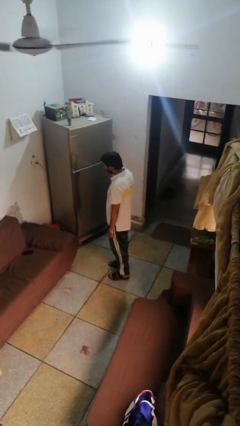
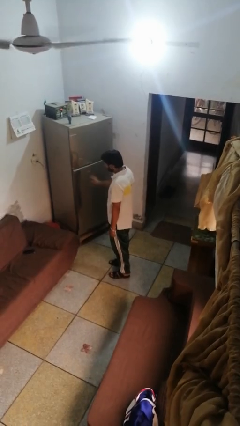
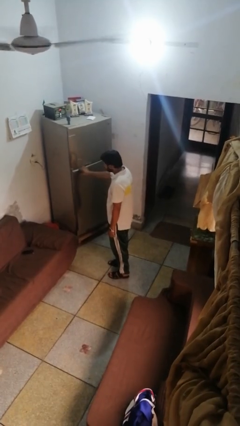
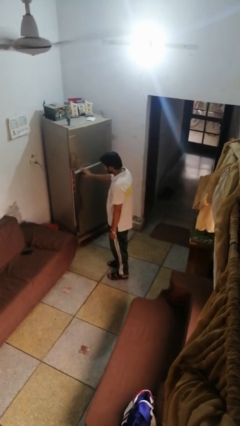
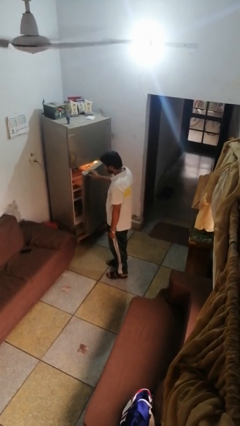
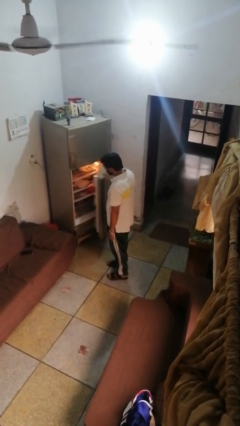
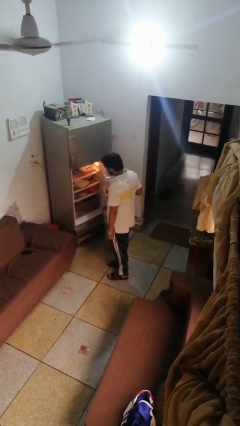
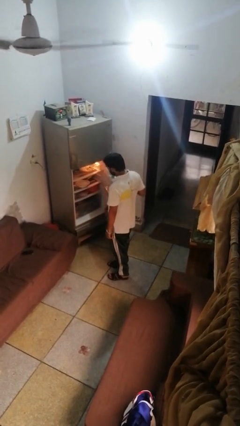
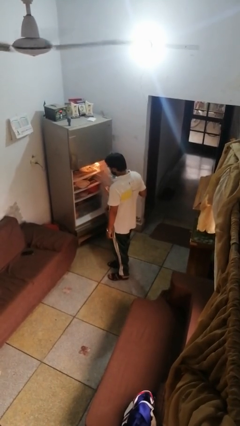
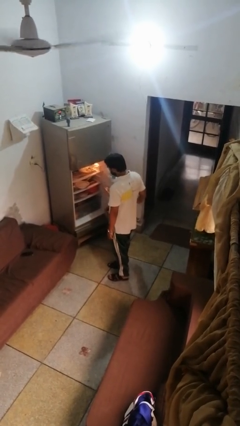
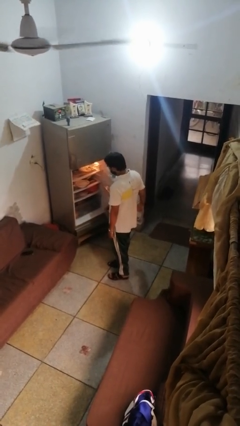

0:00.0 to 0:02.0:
person opens refrigerator

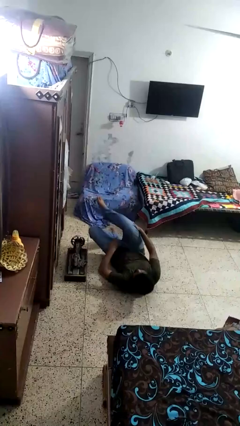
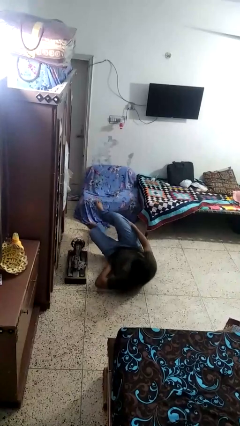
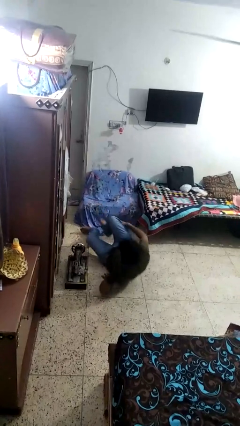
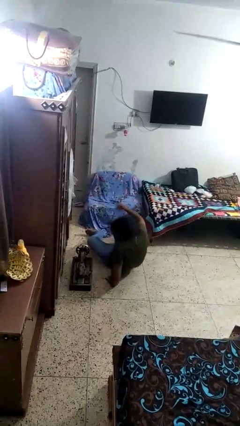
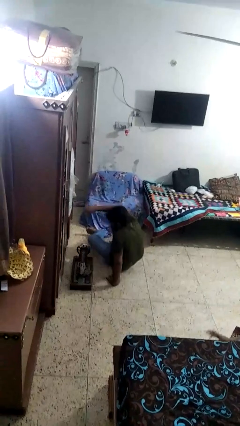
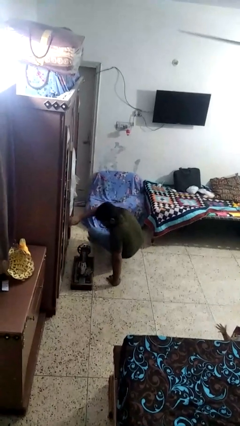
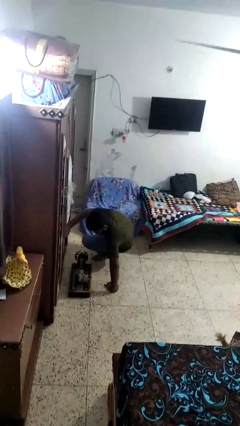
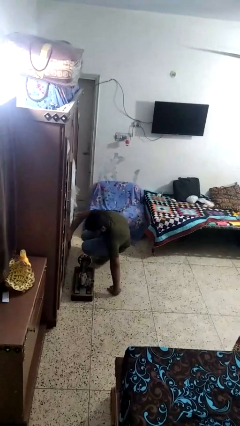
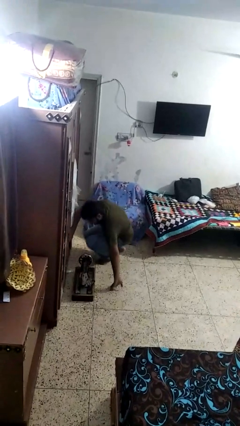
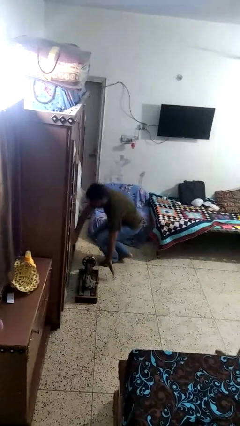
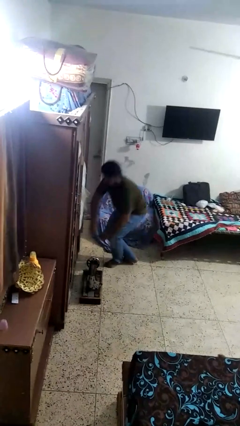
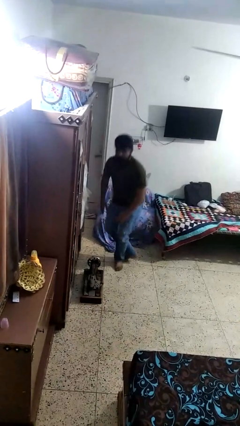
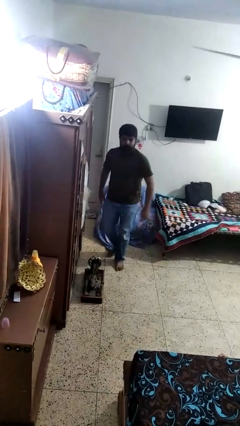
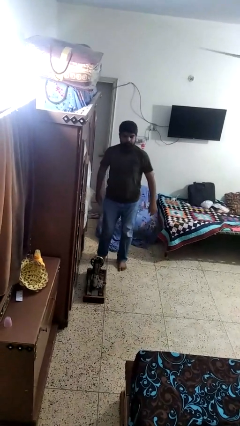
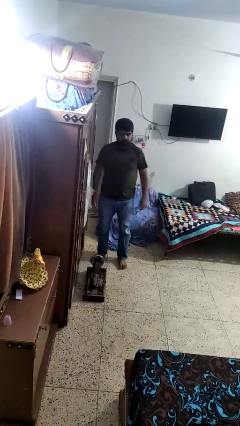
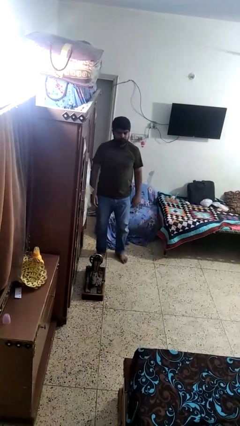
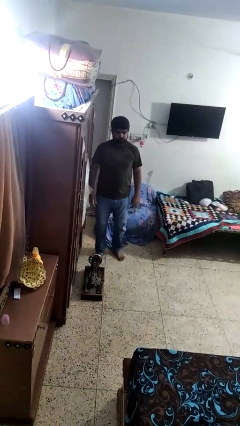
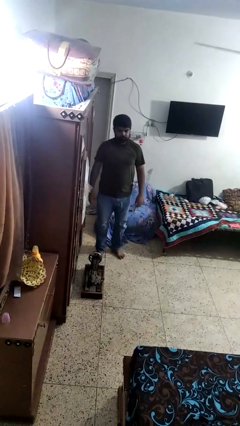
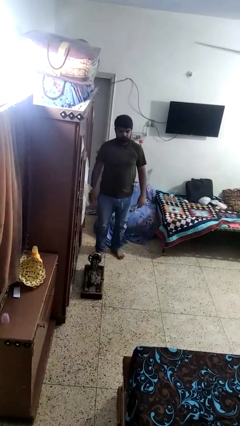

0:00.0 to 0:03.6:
person stands up from floor

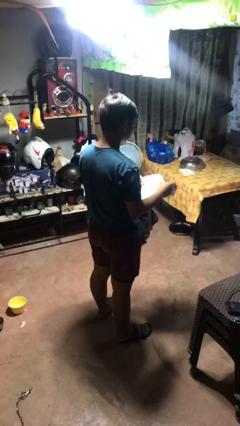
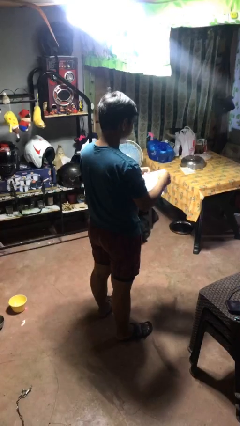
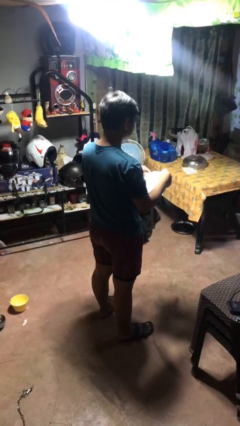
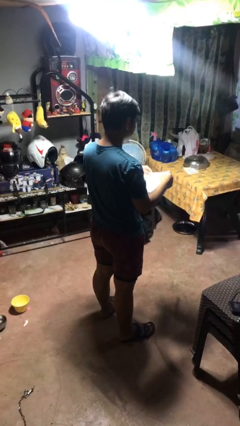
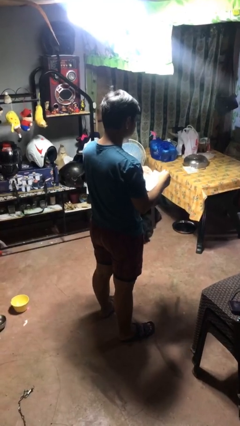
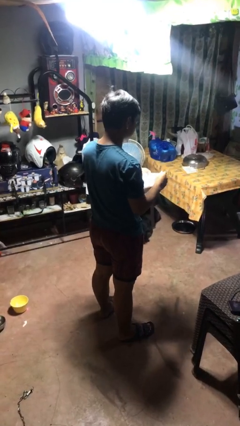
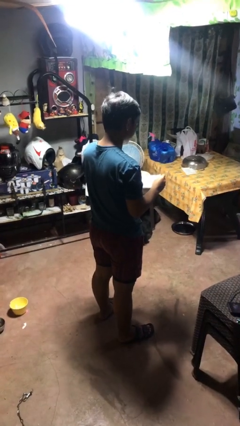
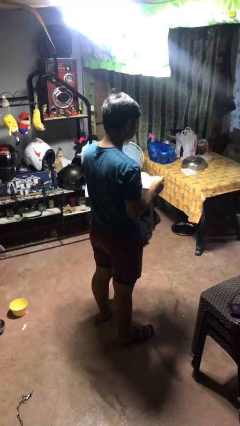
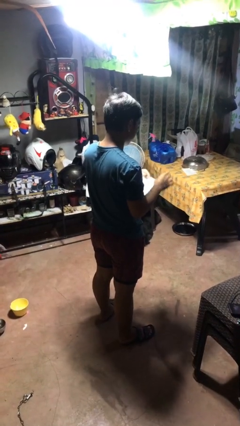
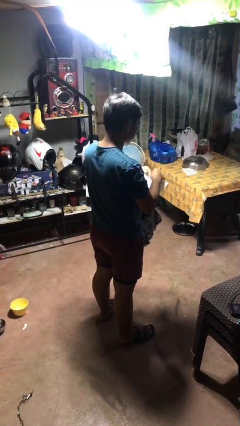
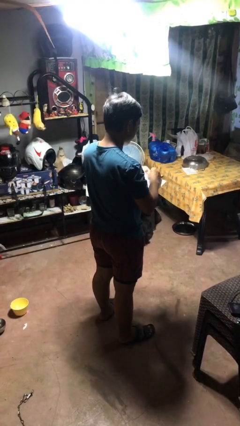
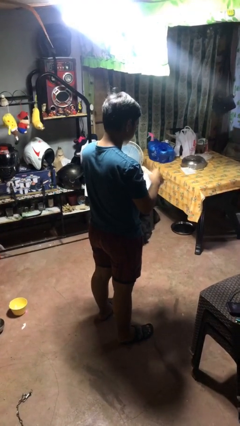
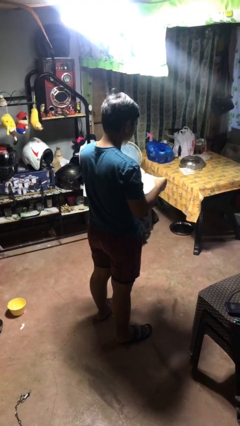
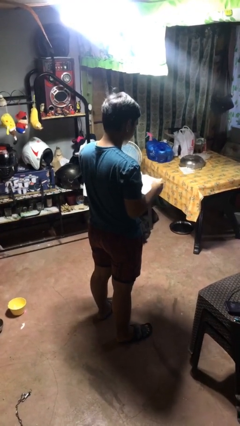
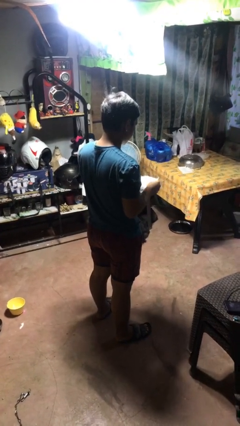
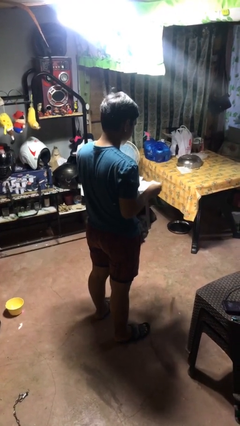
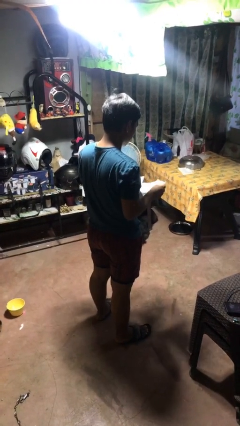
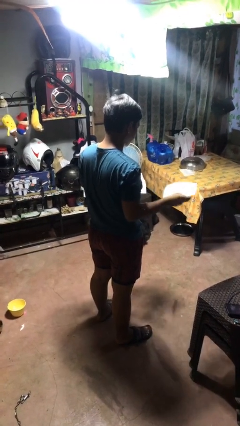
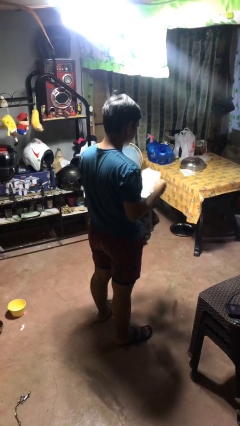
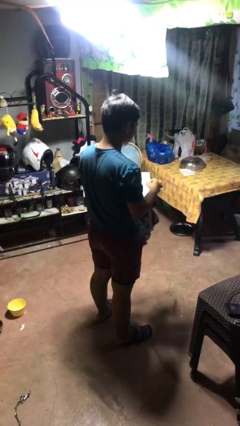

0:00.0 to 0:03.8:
person tears paper

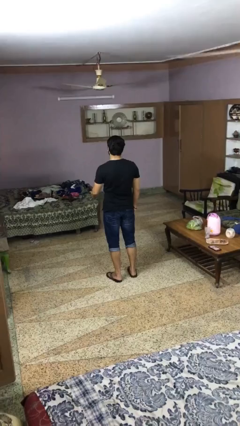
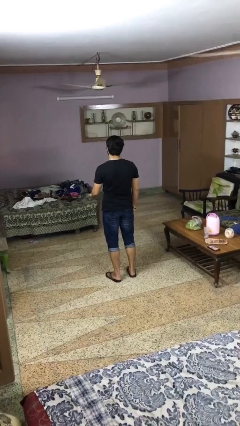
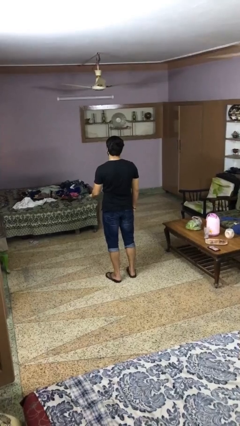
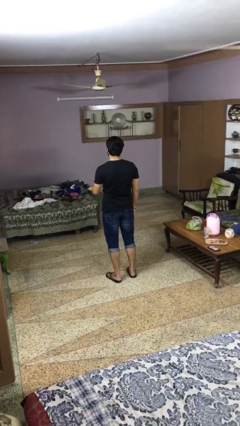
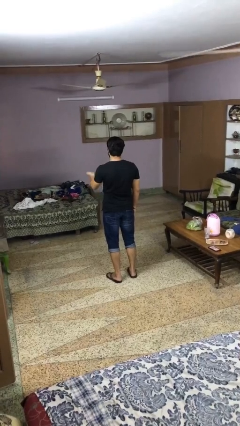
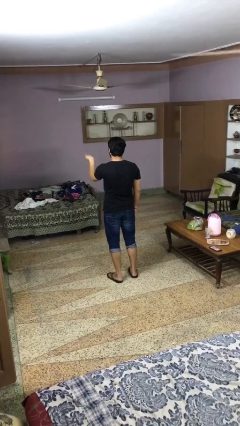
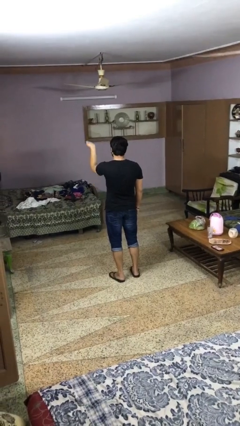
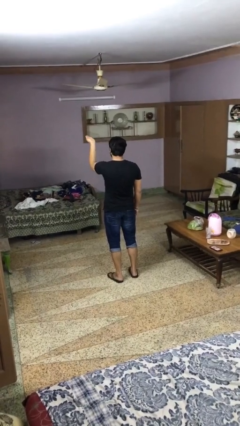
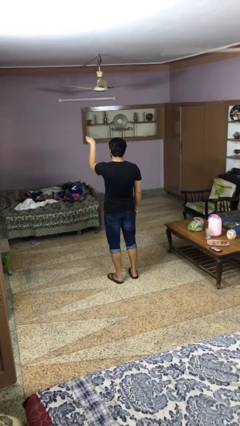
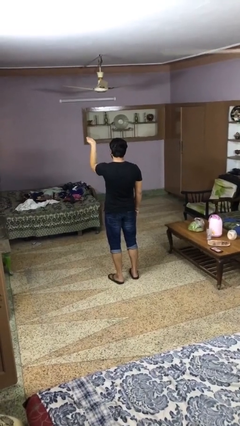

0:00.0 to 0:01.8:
person gestures swipe up

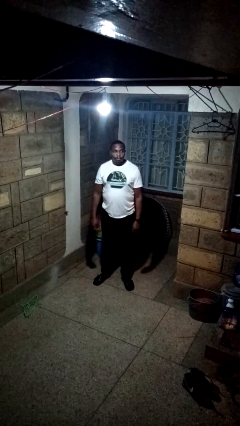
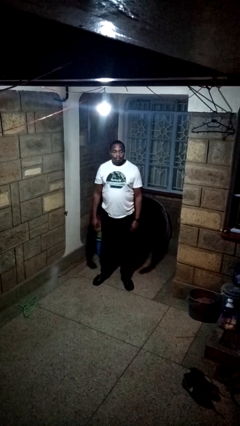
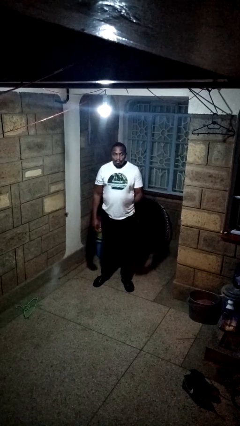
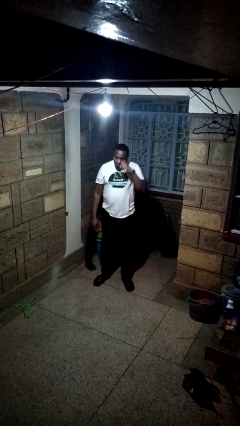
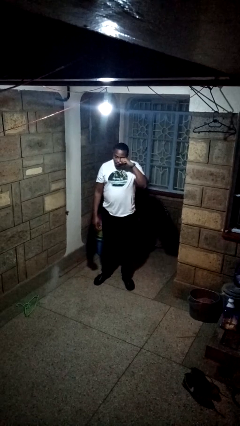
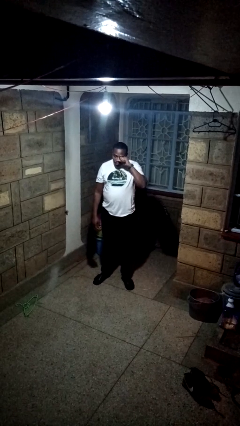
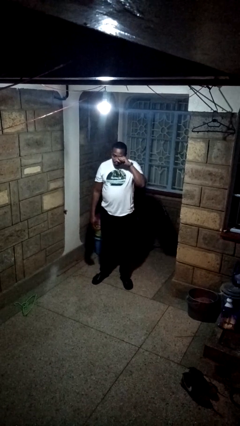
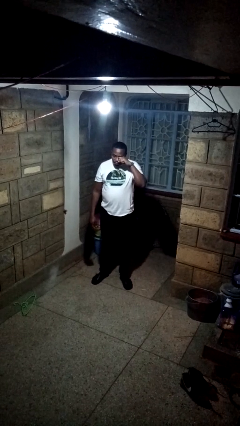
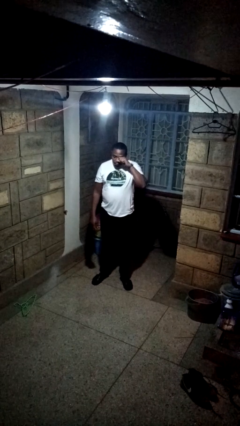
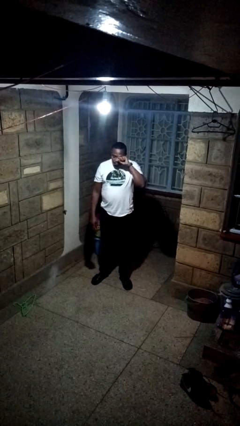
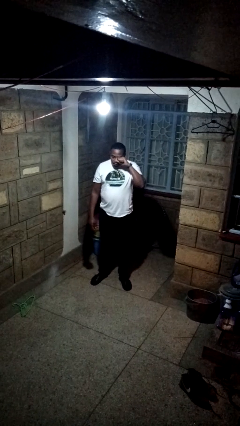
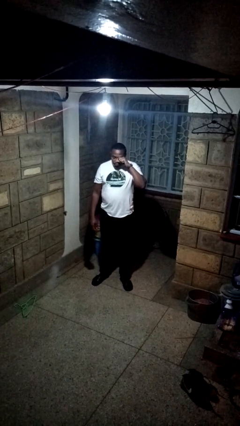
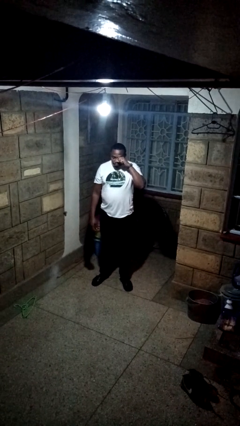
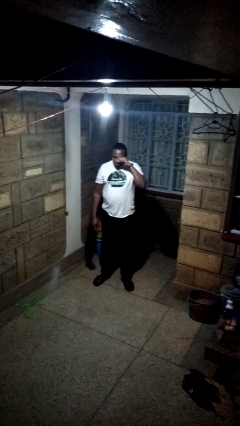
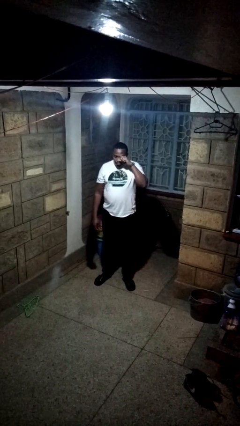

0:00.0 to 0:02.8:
person rubs eyes

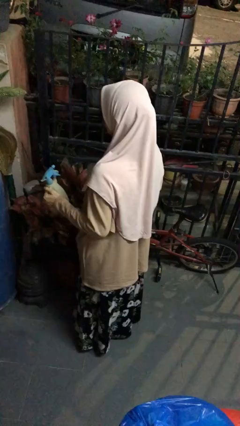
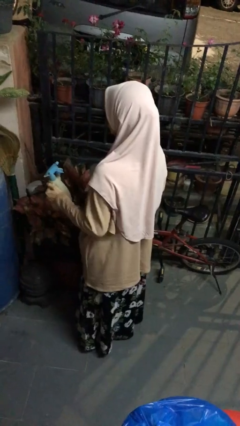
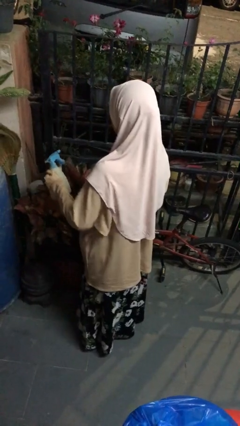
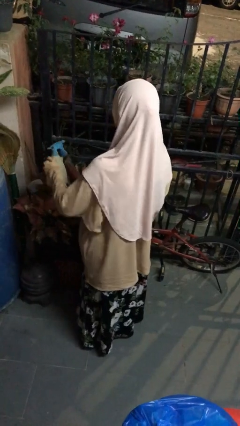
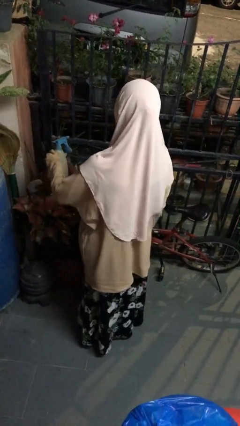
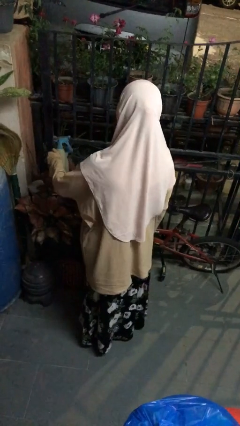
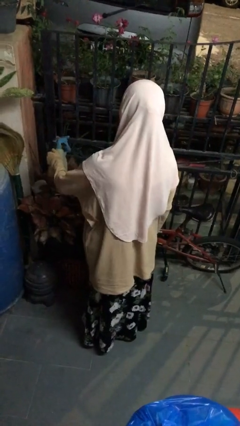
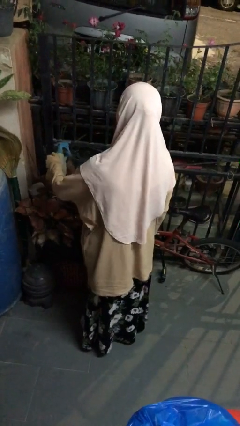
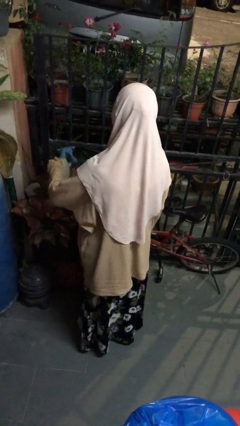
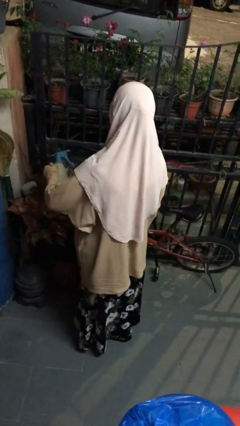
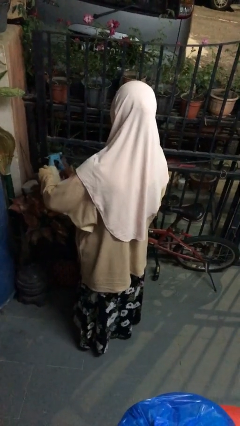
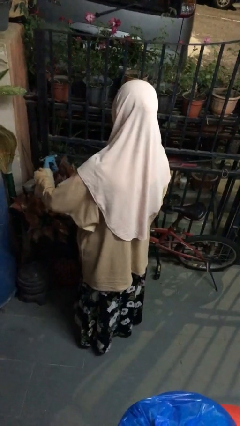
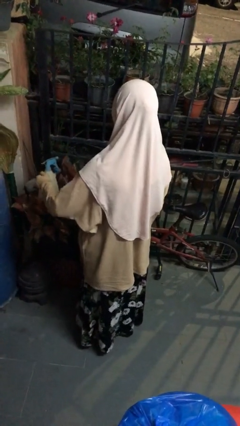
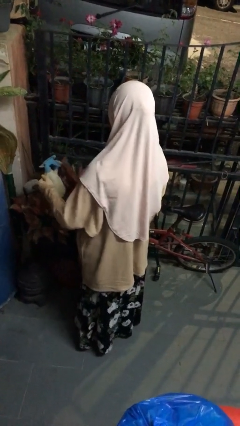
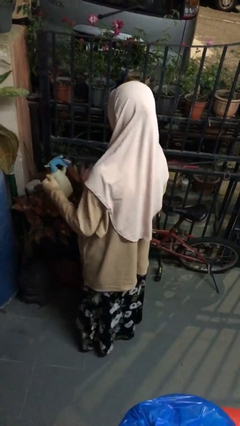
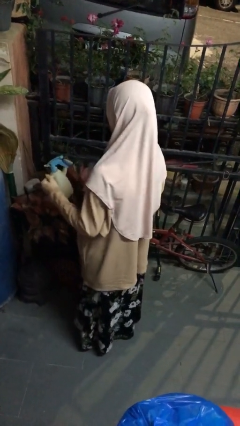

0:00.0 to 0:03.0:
person waters houseplant
